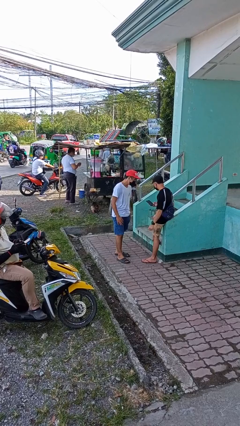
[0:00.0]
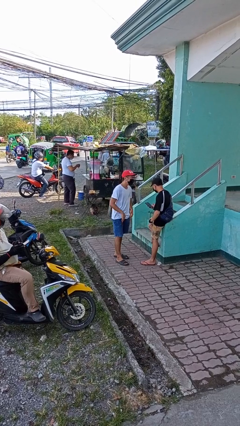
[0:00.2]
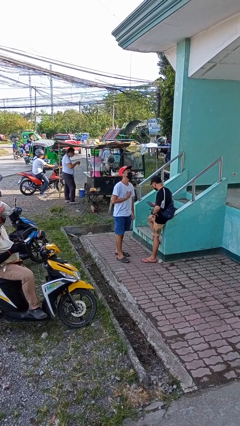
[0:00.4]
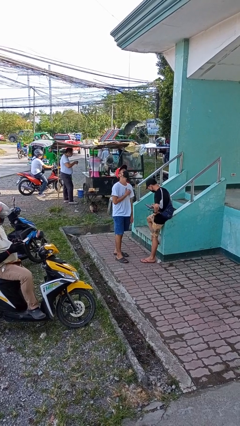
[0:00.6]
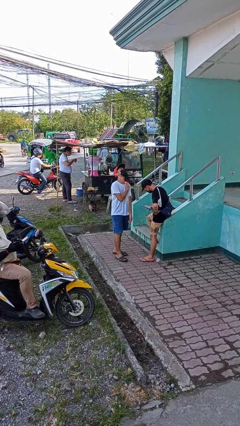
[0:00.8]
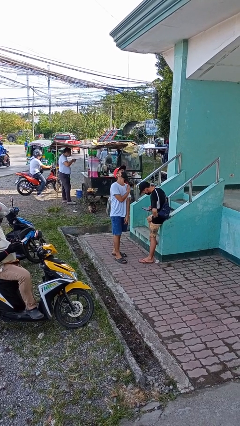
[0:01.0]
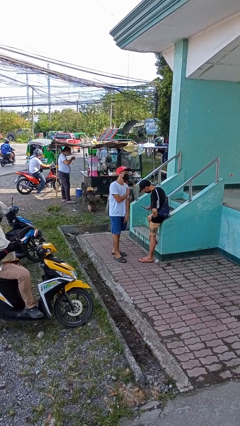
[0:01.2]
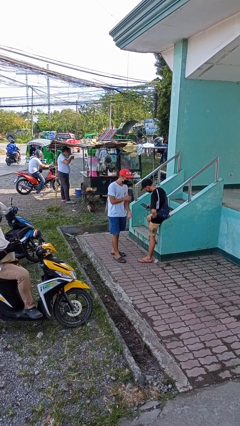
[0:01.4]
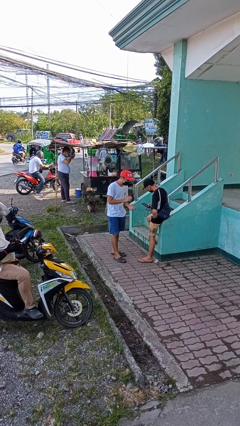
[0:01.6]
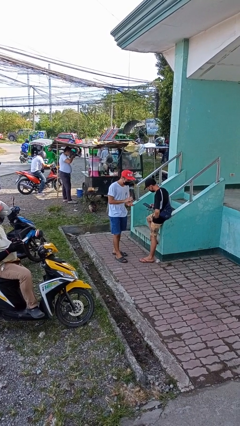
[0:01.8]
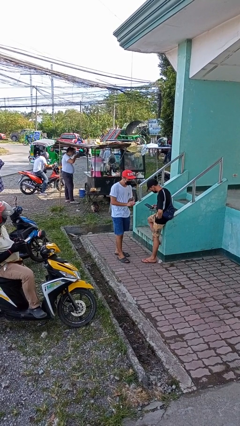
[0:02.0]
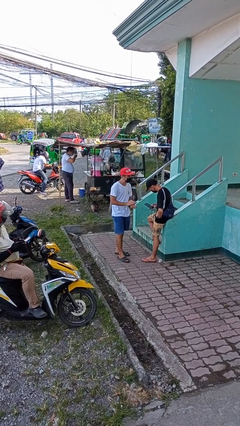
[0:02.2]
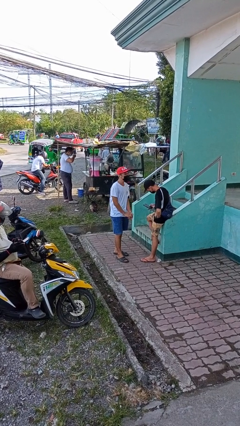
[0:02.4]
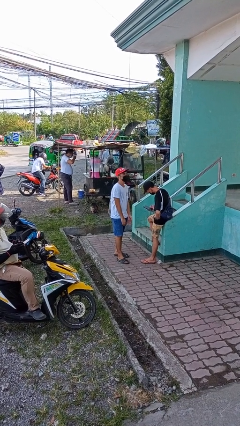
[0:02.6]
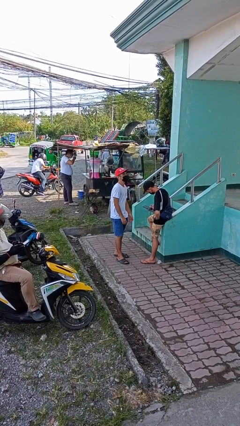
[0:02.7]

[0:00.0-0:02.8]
person laughs with person

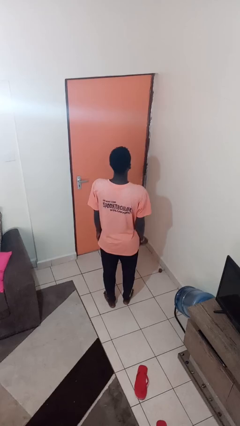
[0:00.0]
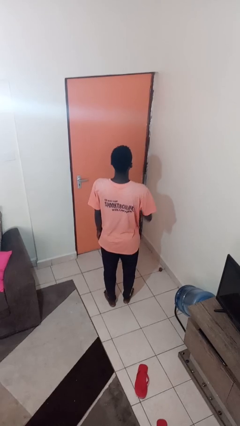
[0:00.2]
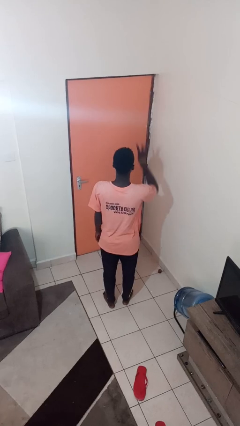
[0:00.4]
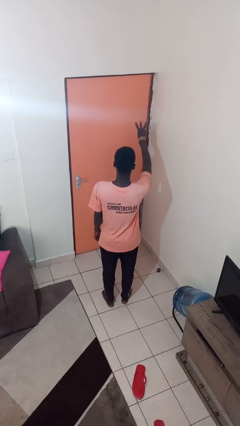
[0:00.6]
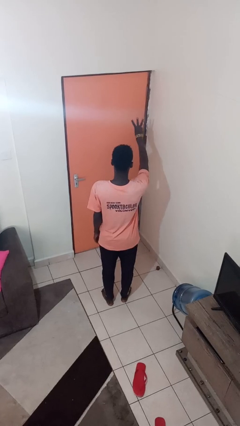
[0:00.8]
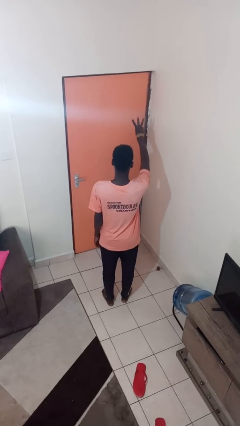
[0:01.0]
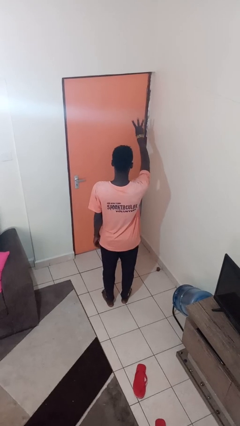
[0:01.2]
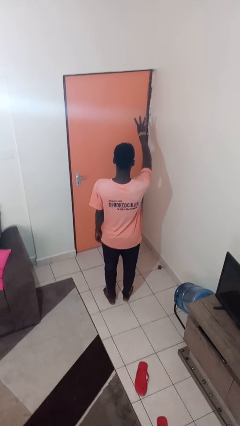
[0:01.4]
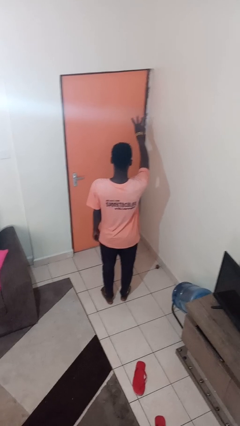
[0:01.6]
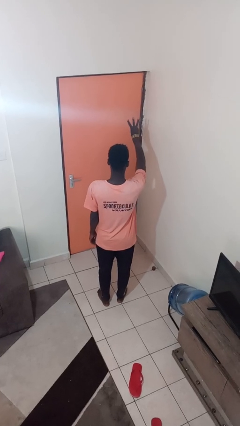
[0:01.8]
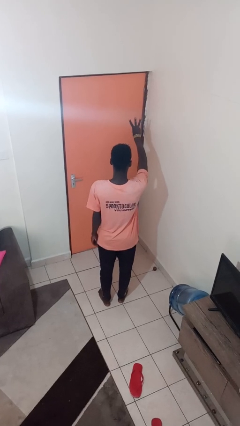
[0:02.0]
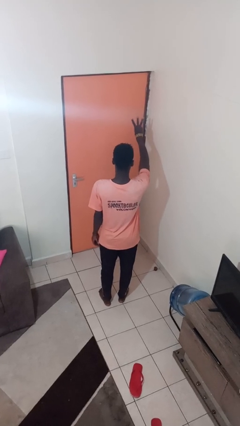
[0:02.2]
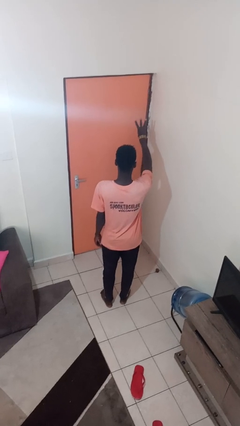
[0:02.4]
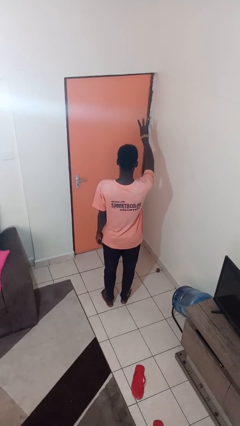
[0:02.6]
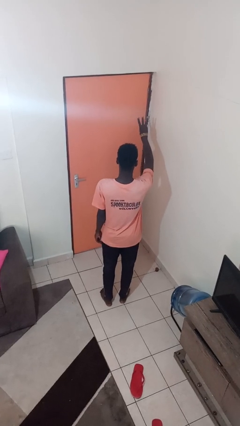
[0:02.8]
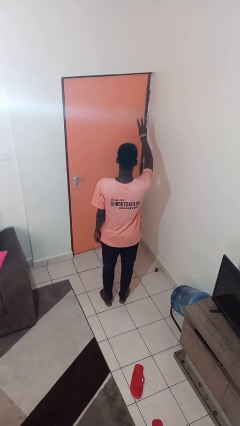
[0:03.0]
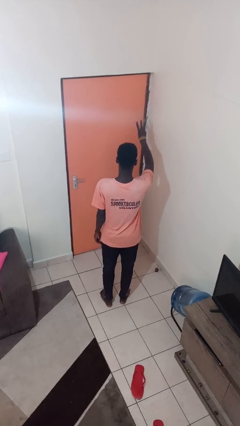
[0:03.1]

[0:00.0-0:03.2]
person gestures number three

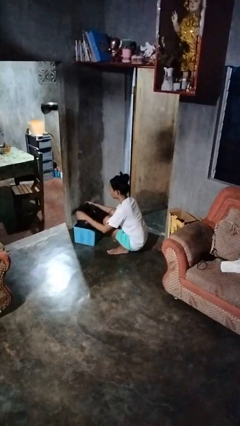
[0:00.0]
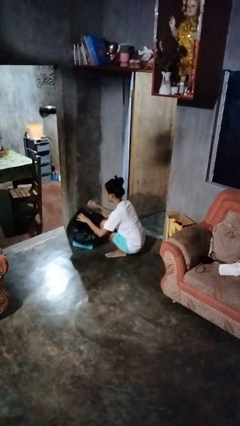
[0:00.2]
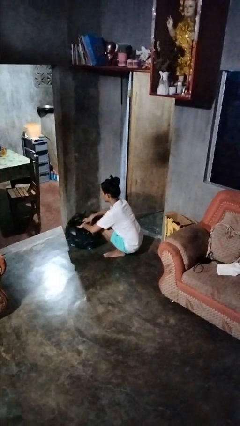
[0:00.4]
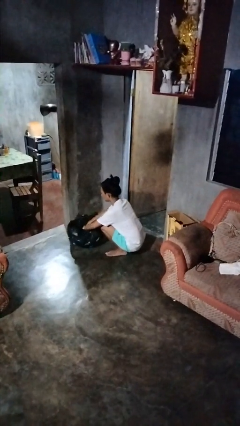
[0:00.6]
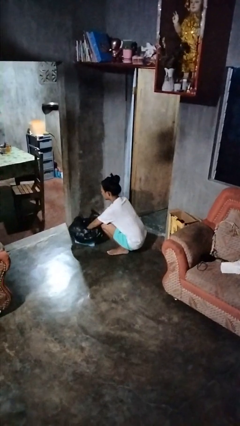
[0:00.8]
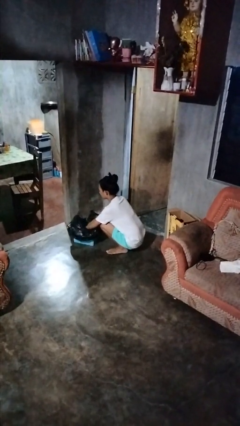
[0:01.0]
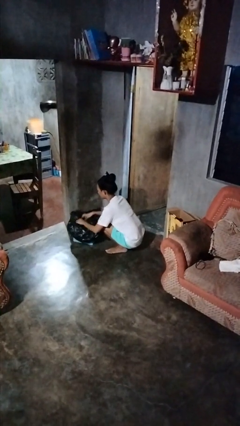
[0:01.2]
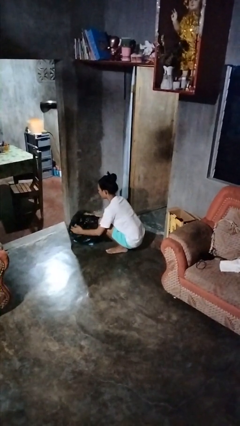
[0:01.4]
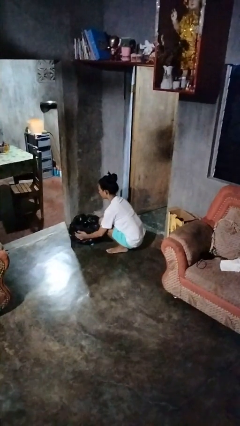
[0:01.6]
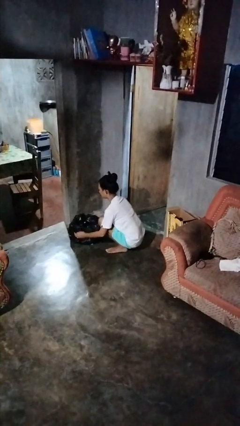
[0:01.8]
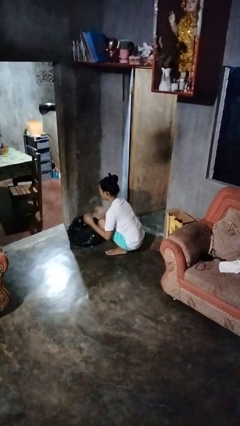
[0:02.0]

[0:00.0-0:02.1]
person inserts trashbag into trashcan

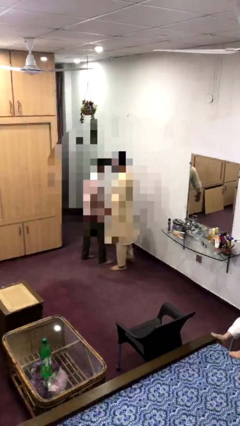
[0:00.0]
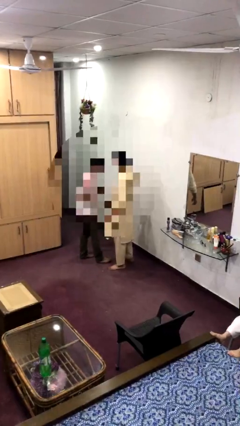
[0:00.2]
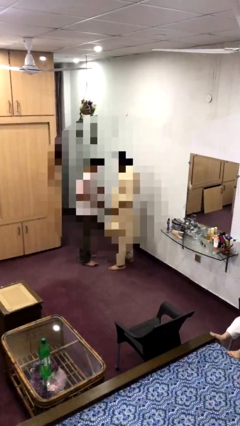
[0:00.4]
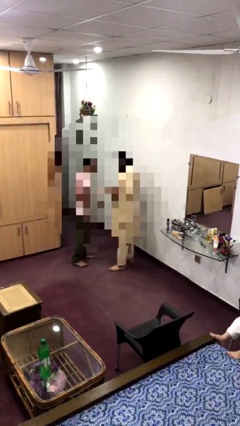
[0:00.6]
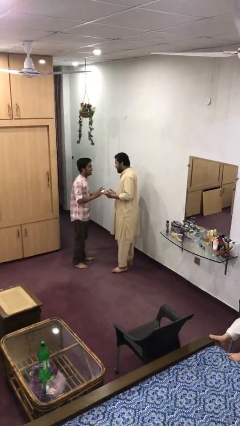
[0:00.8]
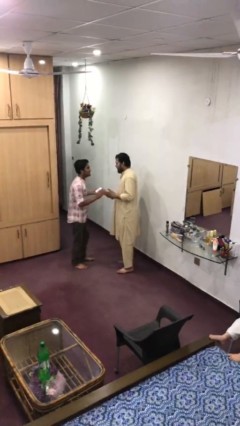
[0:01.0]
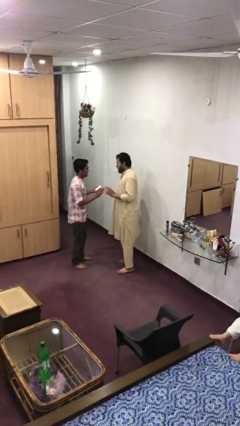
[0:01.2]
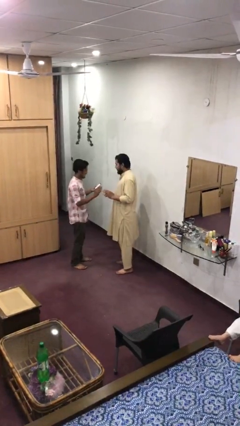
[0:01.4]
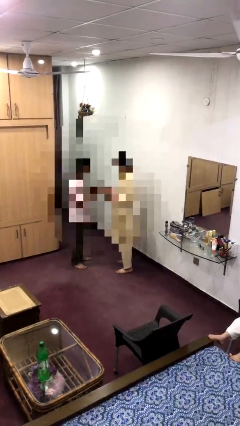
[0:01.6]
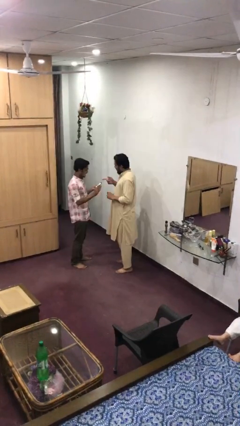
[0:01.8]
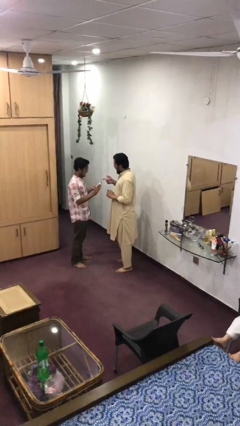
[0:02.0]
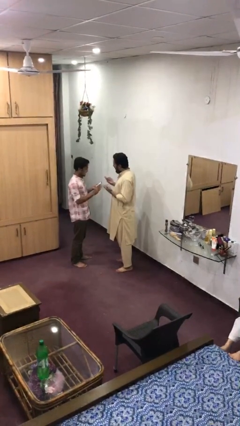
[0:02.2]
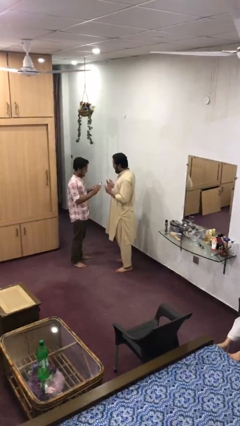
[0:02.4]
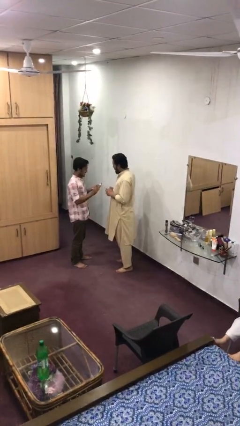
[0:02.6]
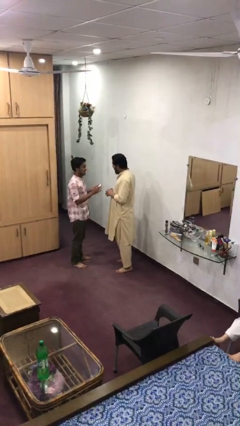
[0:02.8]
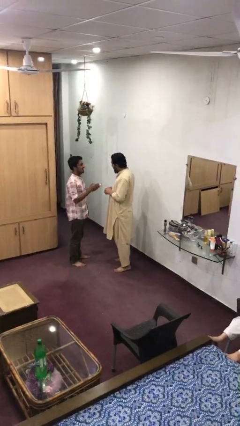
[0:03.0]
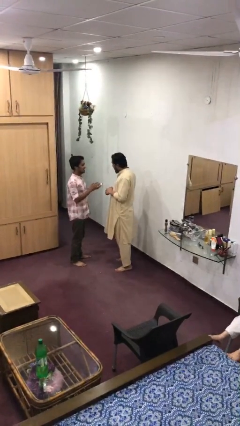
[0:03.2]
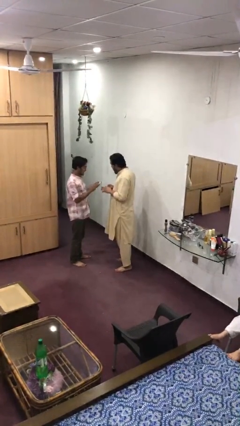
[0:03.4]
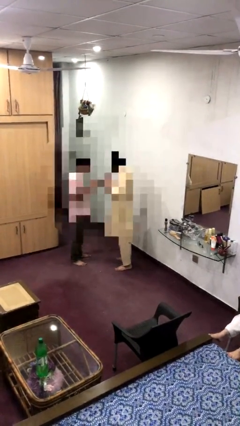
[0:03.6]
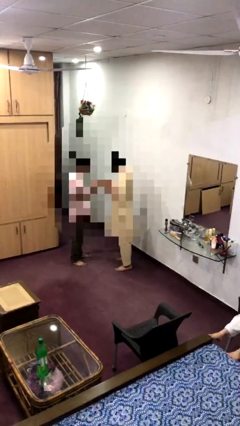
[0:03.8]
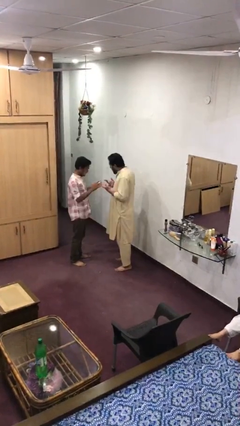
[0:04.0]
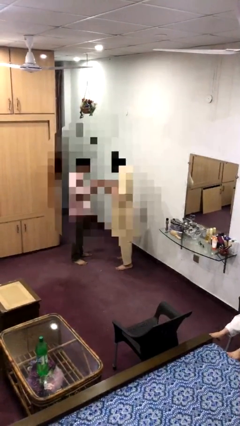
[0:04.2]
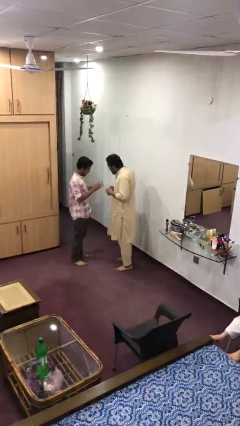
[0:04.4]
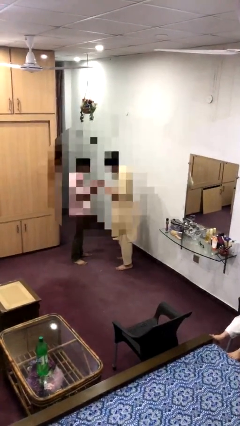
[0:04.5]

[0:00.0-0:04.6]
person talks to person

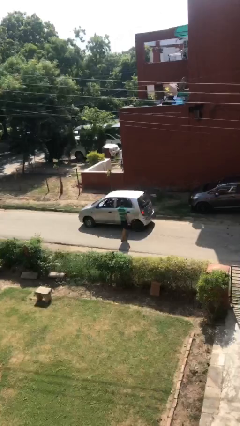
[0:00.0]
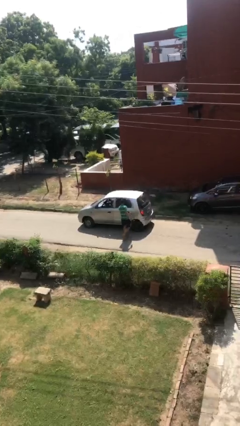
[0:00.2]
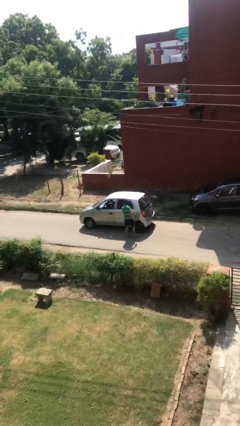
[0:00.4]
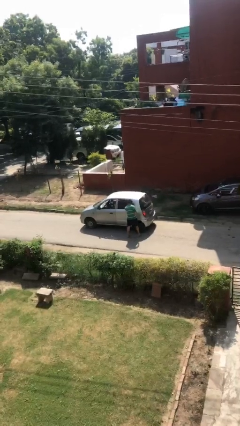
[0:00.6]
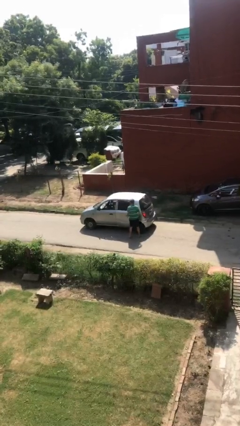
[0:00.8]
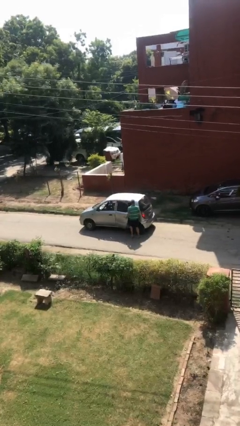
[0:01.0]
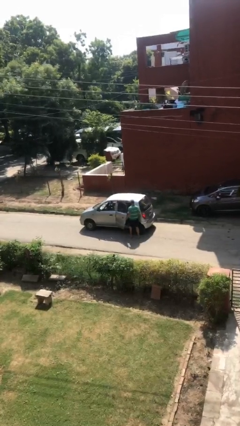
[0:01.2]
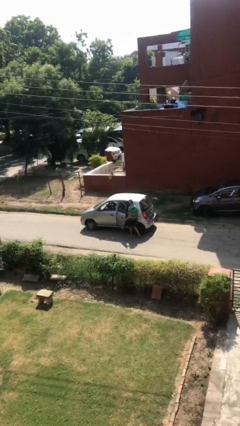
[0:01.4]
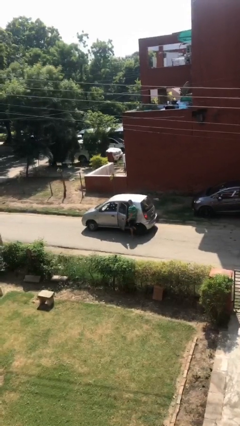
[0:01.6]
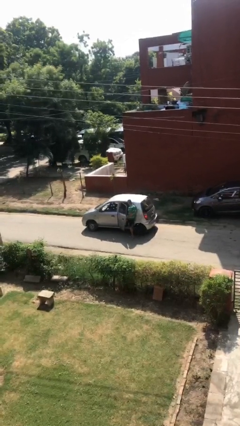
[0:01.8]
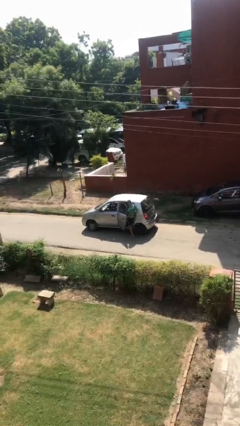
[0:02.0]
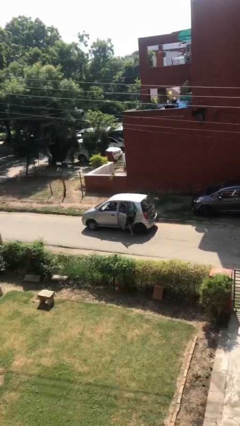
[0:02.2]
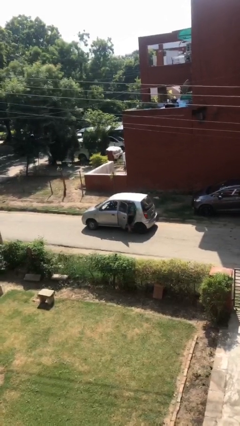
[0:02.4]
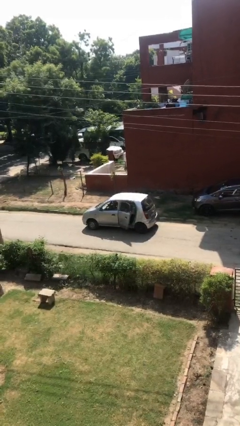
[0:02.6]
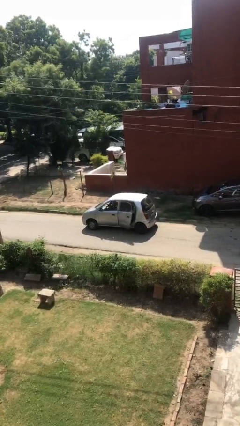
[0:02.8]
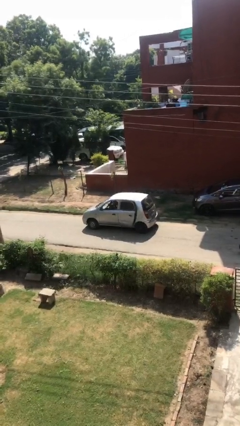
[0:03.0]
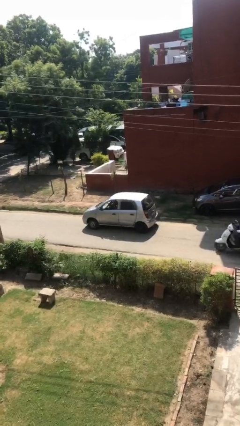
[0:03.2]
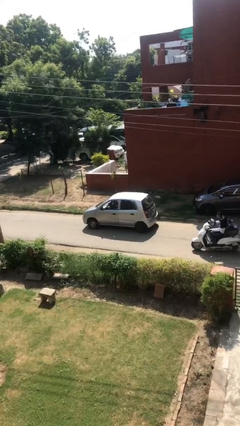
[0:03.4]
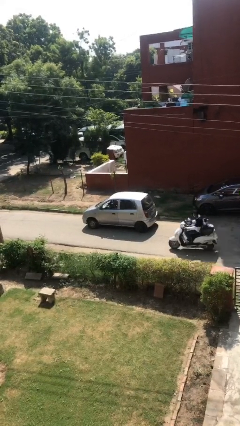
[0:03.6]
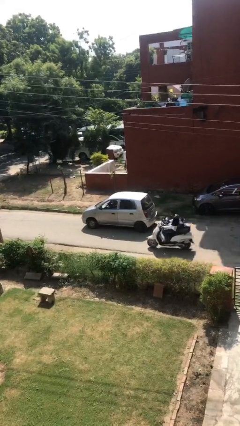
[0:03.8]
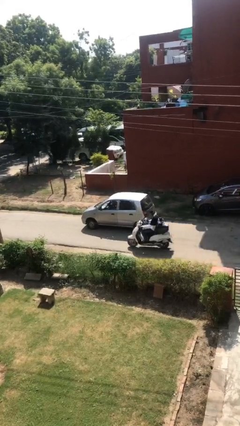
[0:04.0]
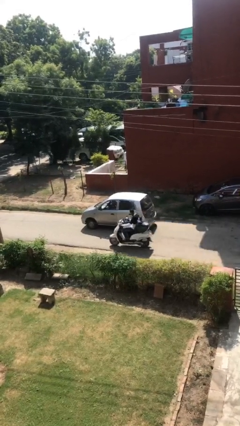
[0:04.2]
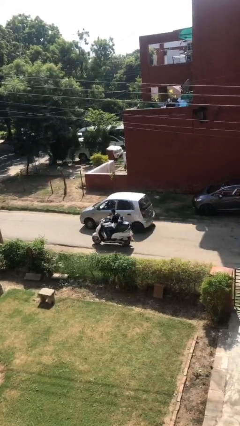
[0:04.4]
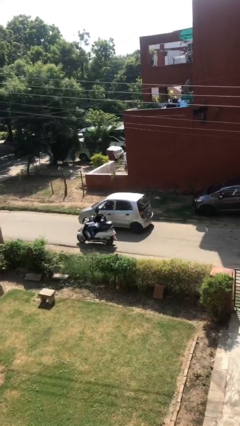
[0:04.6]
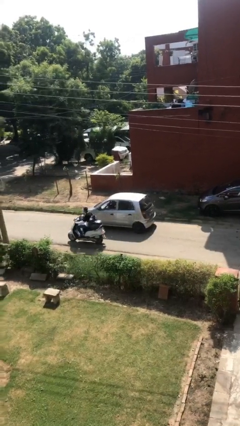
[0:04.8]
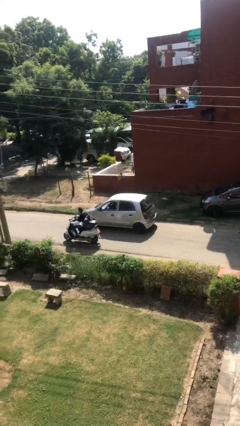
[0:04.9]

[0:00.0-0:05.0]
car picks up person

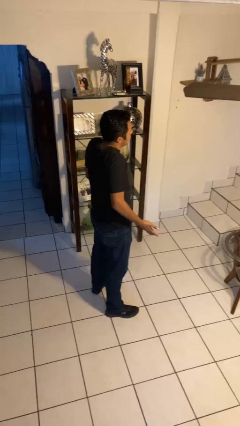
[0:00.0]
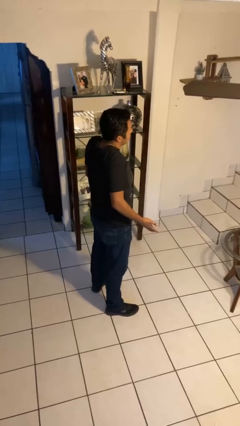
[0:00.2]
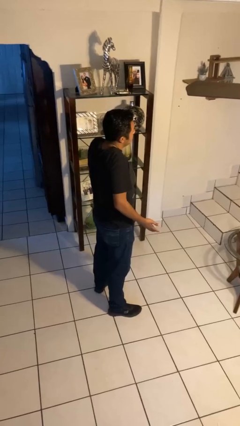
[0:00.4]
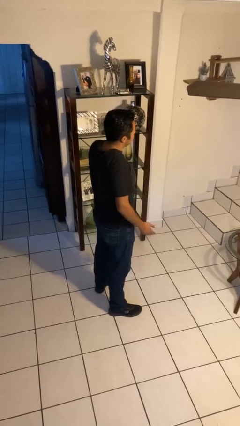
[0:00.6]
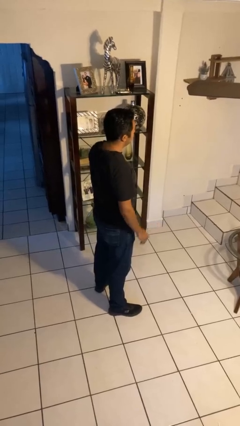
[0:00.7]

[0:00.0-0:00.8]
person shrugs
